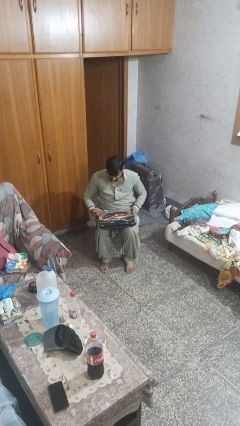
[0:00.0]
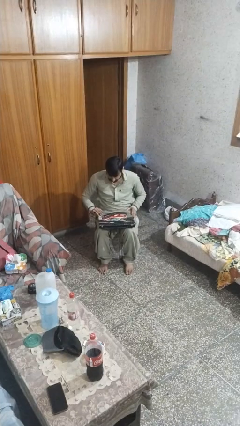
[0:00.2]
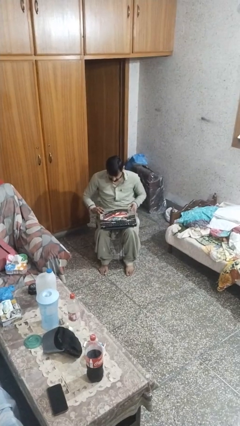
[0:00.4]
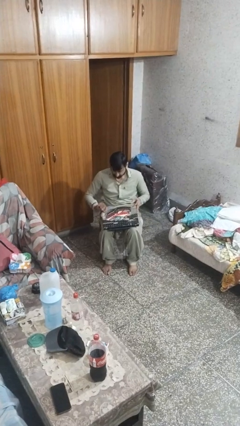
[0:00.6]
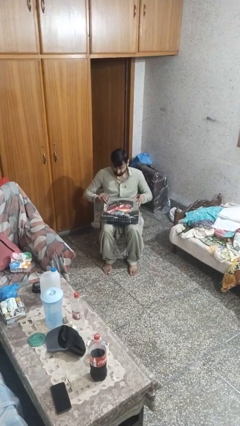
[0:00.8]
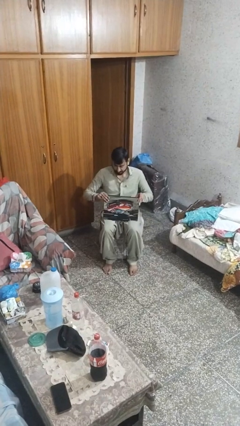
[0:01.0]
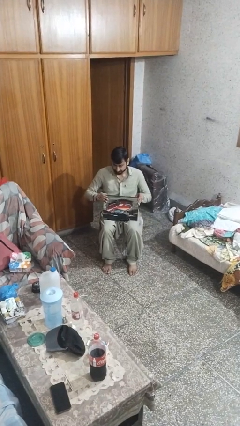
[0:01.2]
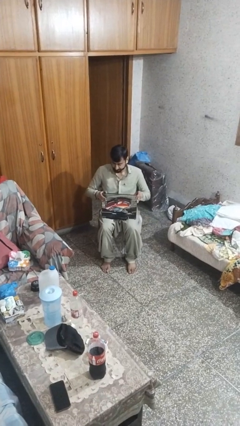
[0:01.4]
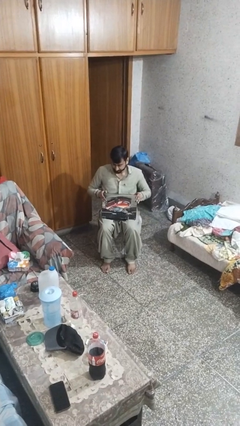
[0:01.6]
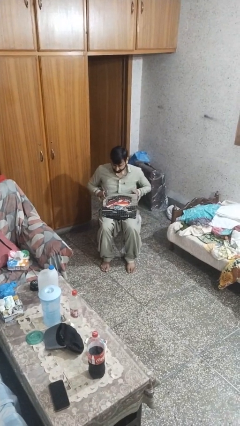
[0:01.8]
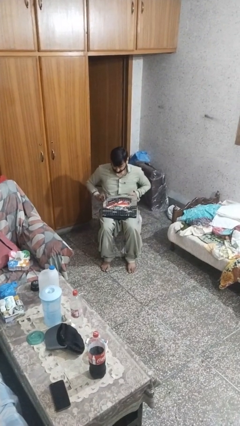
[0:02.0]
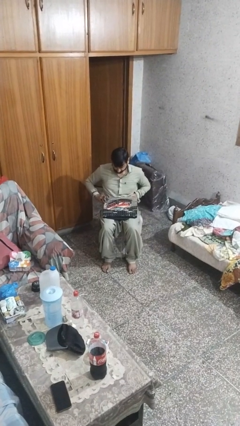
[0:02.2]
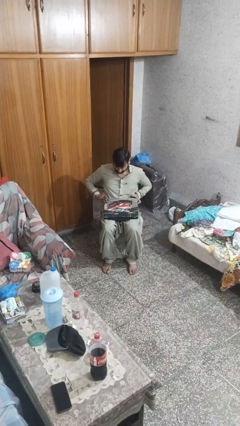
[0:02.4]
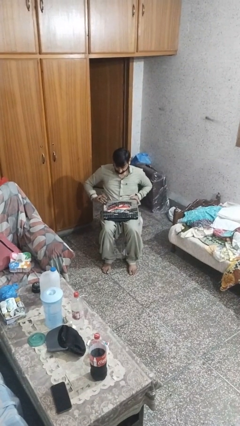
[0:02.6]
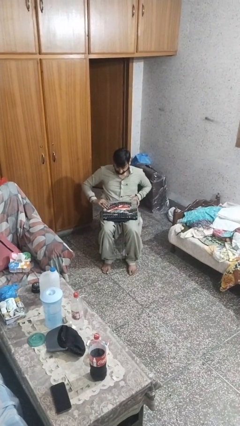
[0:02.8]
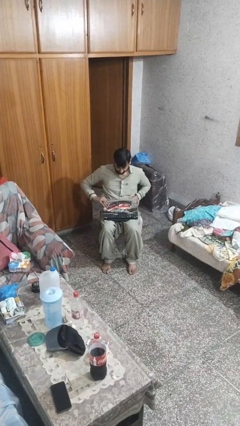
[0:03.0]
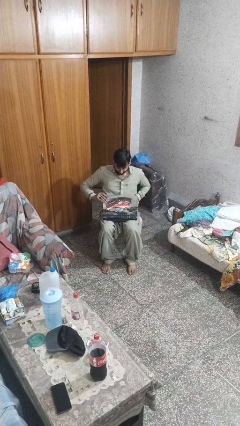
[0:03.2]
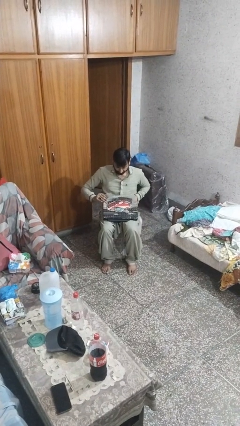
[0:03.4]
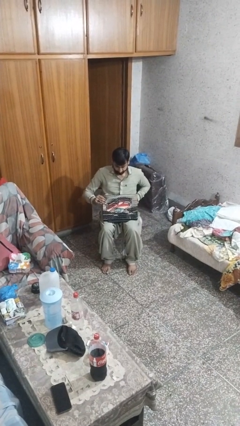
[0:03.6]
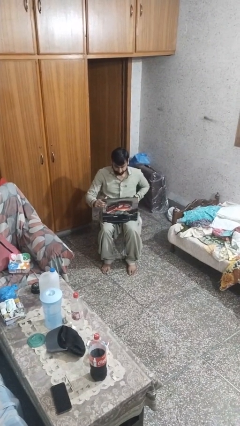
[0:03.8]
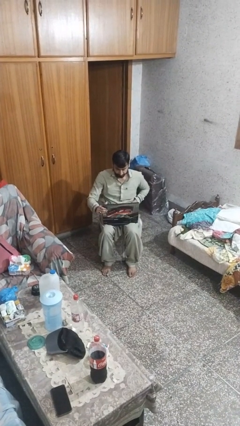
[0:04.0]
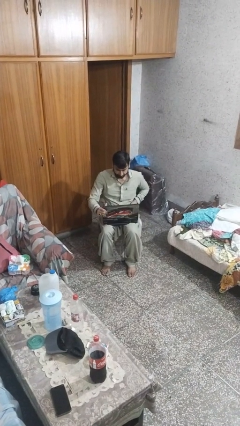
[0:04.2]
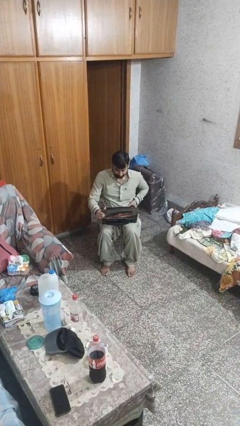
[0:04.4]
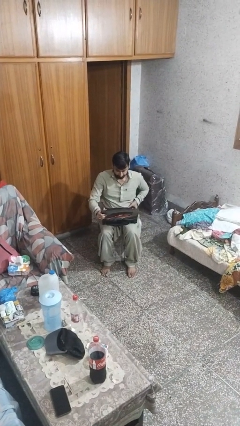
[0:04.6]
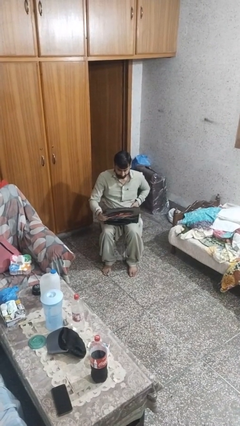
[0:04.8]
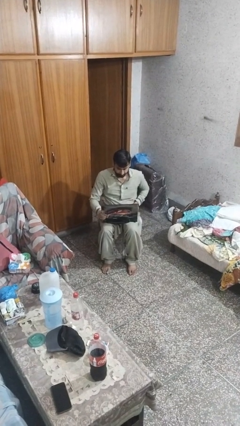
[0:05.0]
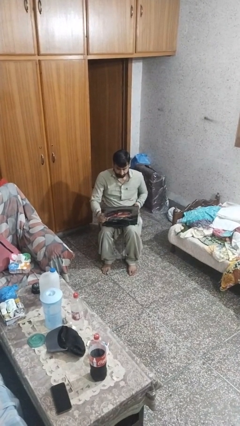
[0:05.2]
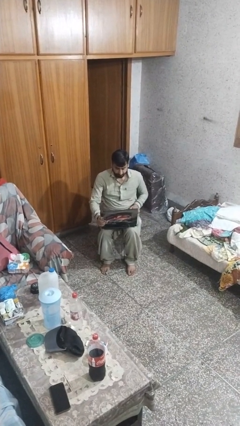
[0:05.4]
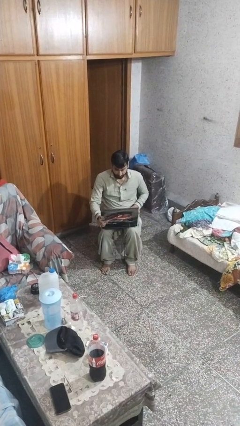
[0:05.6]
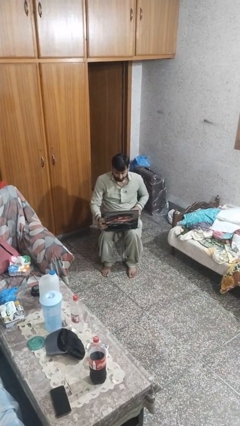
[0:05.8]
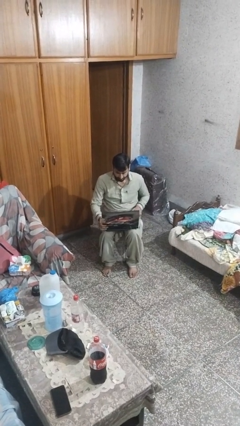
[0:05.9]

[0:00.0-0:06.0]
person opens laptop

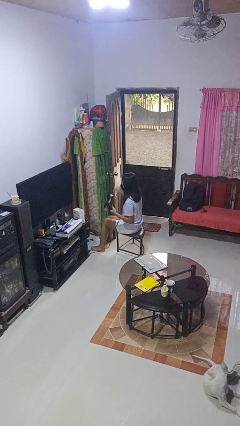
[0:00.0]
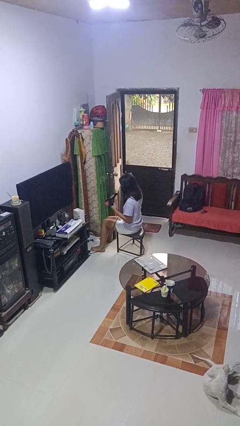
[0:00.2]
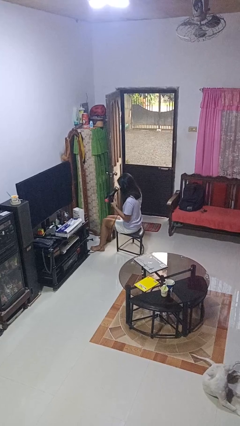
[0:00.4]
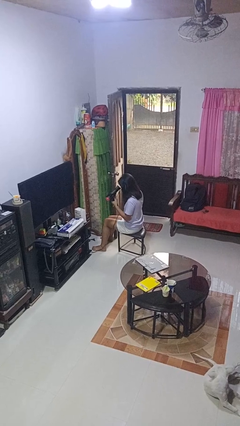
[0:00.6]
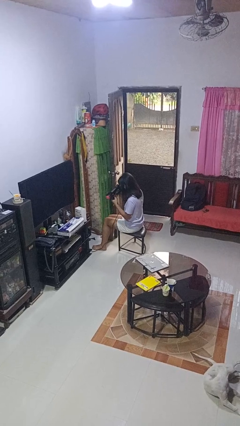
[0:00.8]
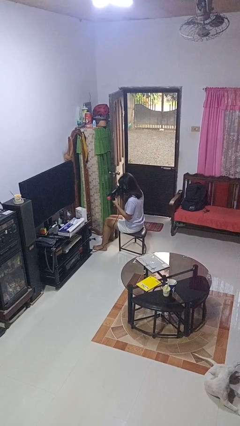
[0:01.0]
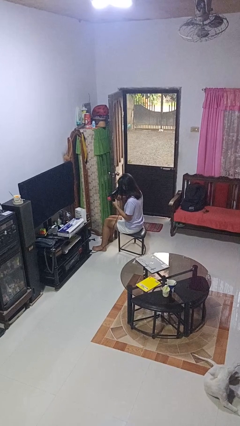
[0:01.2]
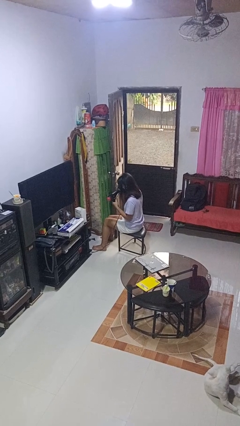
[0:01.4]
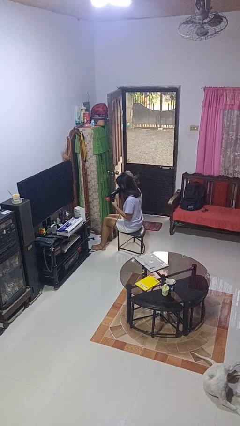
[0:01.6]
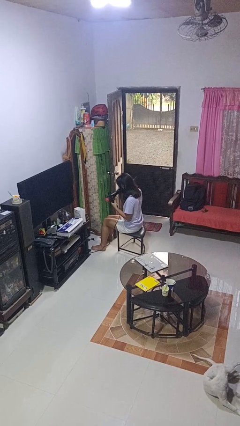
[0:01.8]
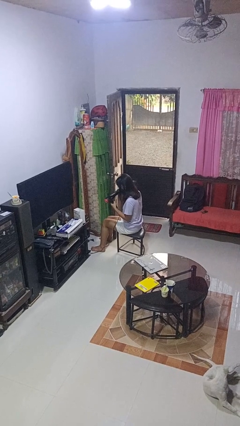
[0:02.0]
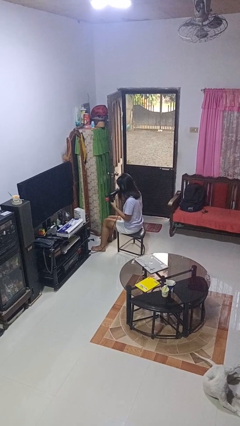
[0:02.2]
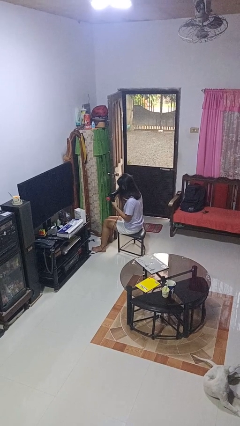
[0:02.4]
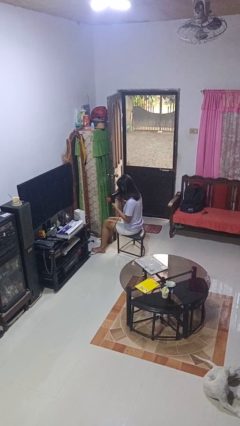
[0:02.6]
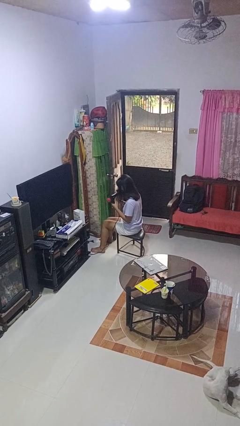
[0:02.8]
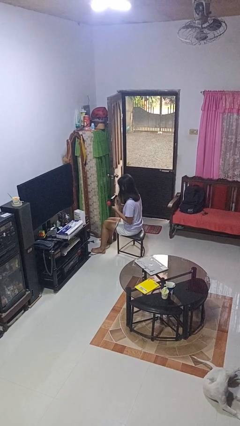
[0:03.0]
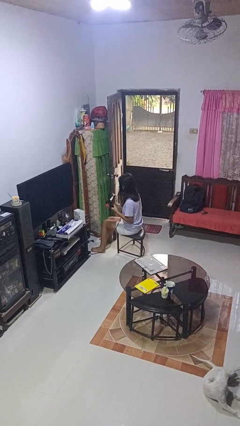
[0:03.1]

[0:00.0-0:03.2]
person dries hair with hairdryer

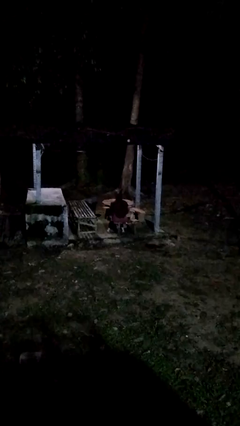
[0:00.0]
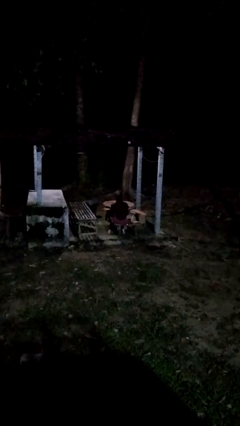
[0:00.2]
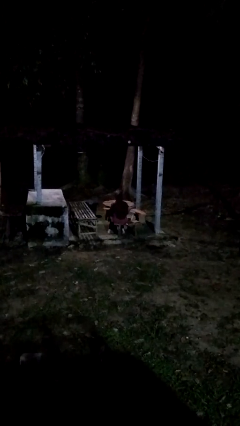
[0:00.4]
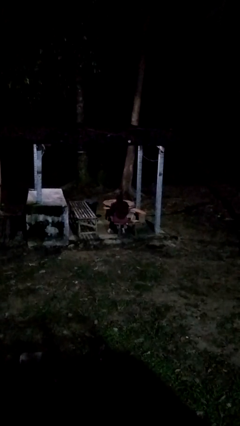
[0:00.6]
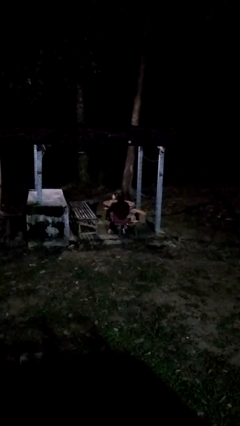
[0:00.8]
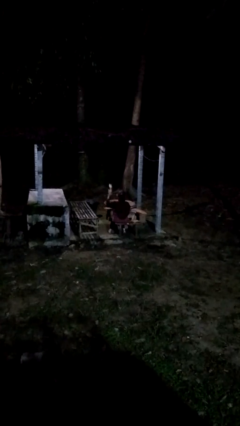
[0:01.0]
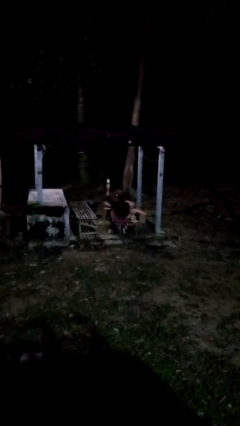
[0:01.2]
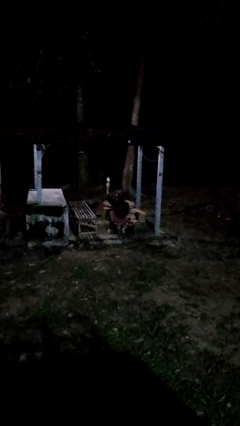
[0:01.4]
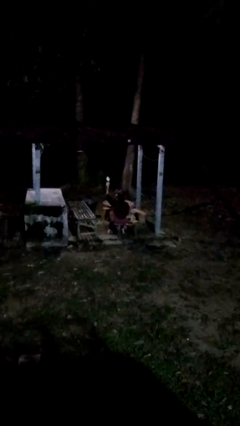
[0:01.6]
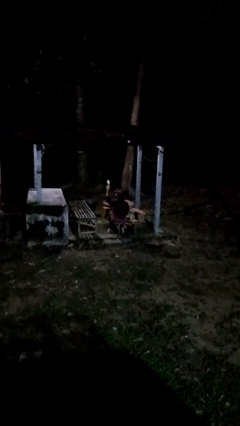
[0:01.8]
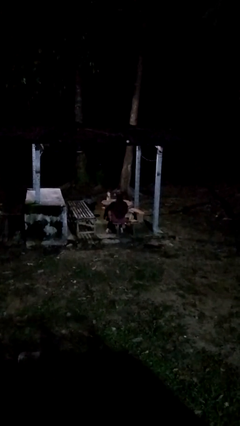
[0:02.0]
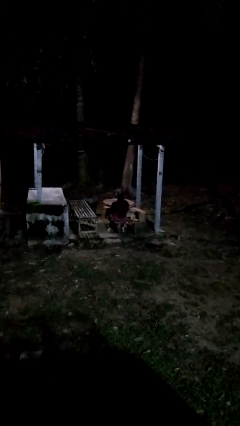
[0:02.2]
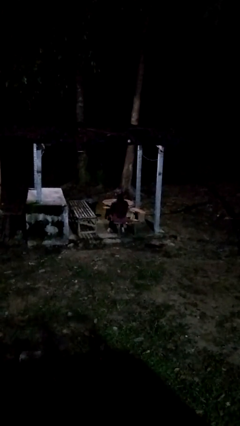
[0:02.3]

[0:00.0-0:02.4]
person holds object above head

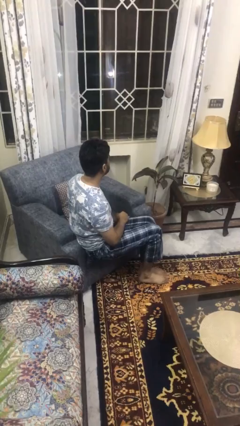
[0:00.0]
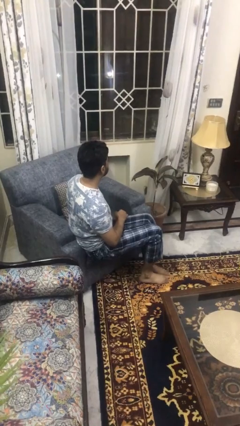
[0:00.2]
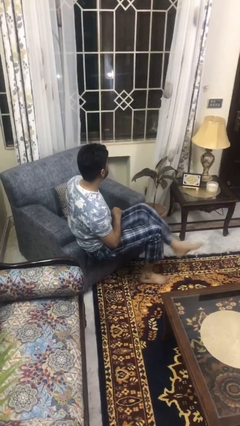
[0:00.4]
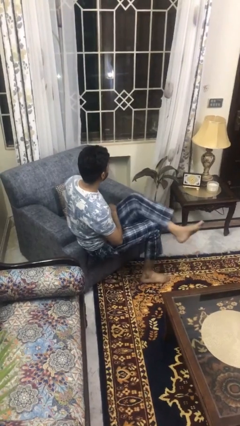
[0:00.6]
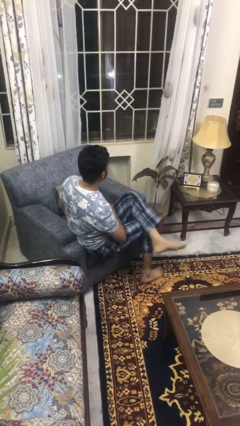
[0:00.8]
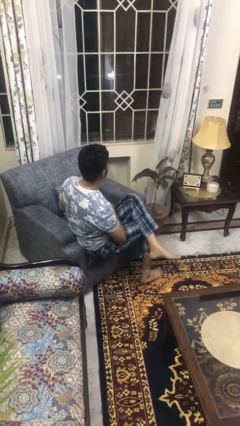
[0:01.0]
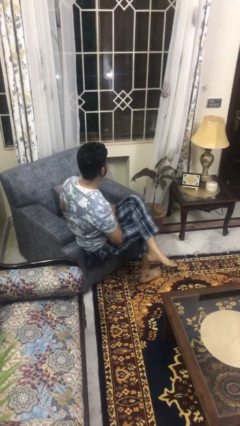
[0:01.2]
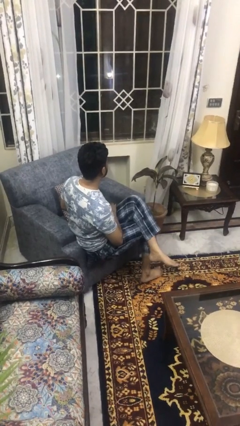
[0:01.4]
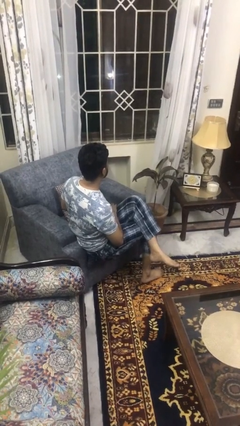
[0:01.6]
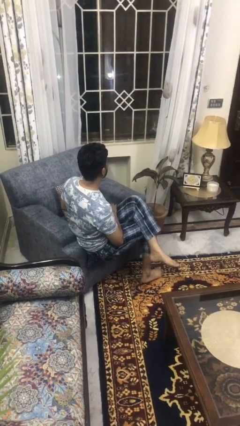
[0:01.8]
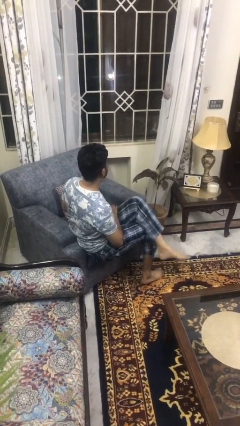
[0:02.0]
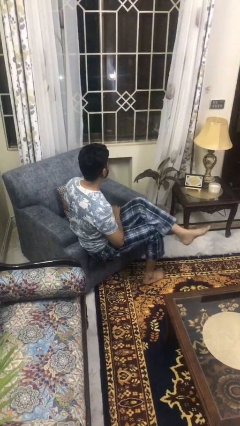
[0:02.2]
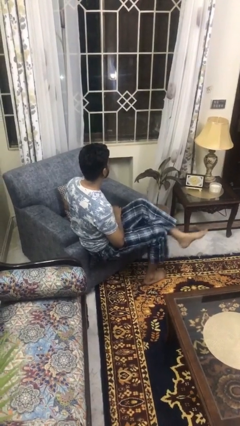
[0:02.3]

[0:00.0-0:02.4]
person crosses legs

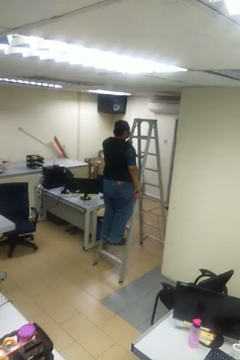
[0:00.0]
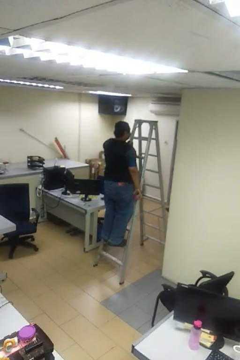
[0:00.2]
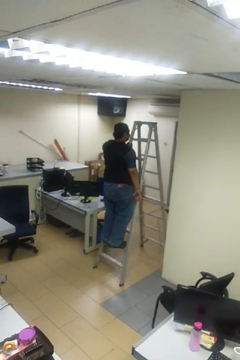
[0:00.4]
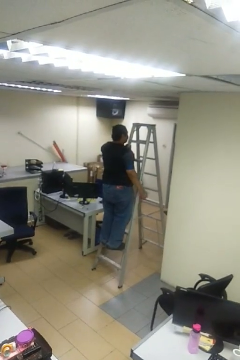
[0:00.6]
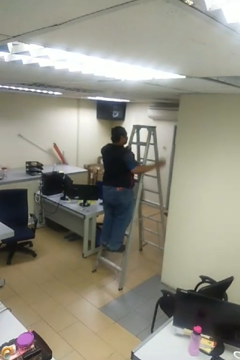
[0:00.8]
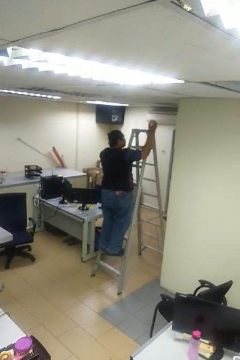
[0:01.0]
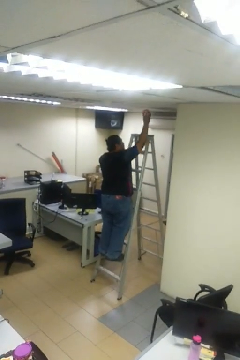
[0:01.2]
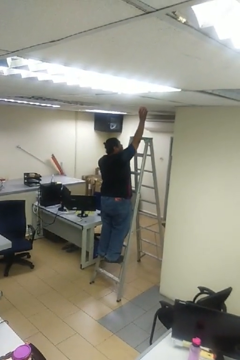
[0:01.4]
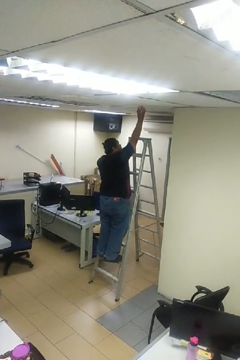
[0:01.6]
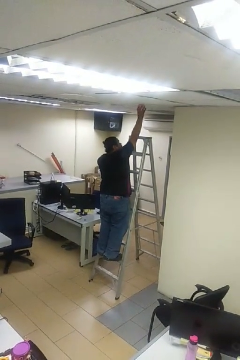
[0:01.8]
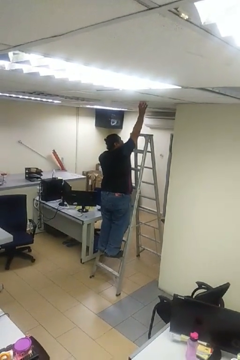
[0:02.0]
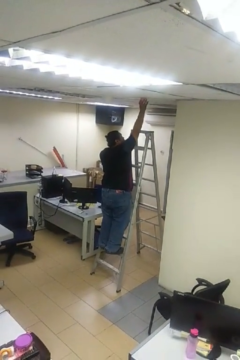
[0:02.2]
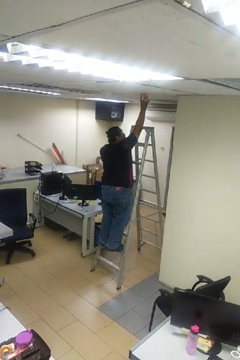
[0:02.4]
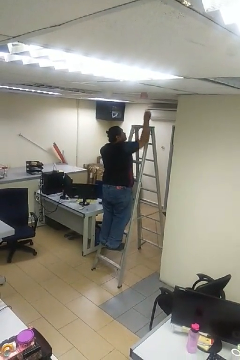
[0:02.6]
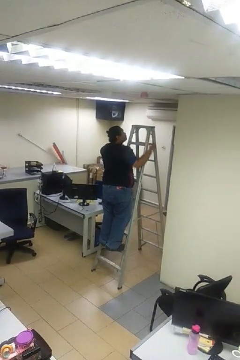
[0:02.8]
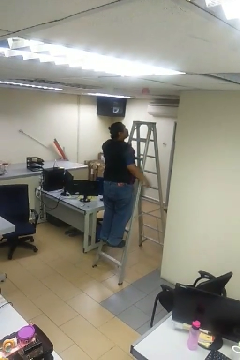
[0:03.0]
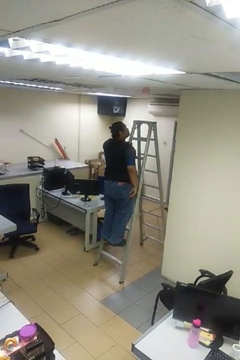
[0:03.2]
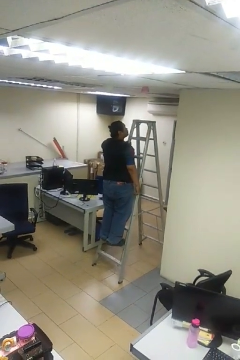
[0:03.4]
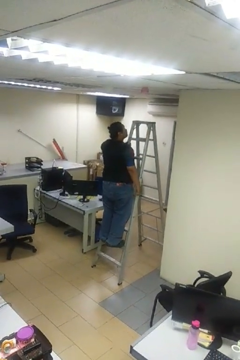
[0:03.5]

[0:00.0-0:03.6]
person puts up smoke detector

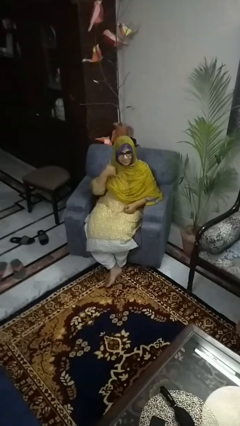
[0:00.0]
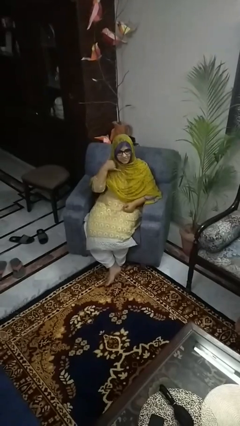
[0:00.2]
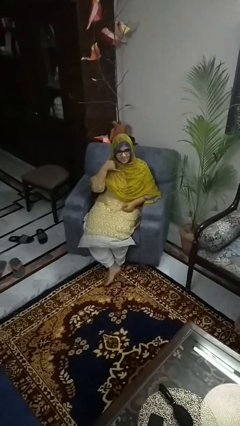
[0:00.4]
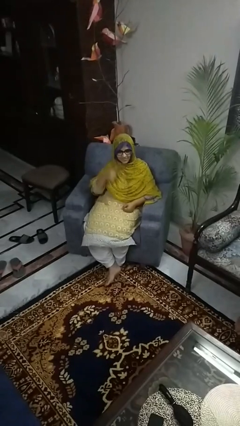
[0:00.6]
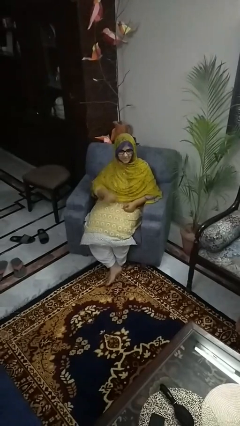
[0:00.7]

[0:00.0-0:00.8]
person gestures call me
